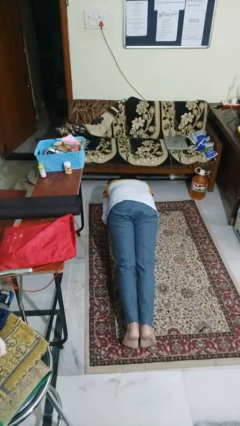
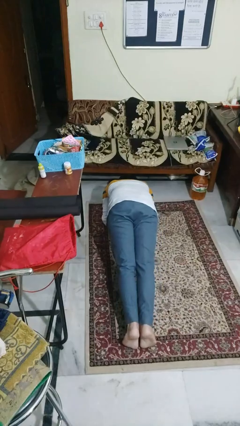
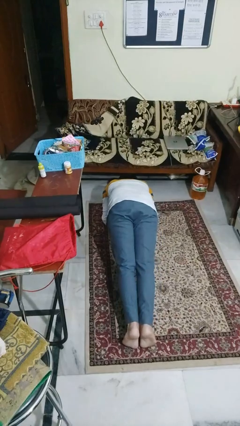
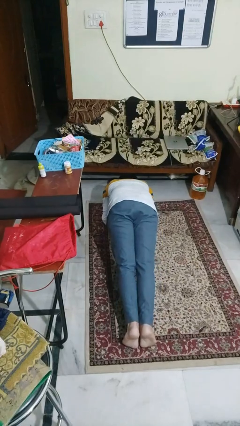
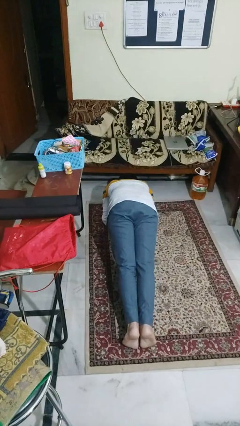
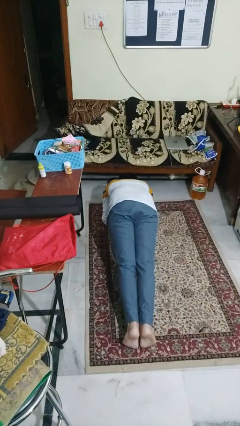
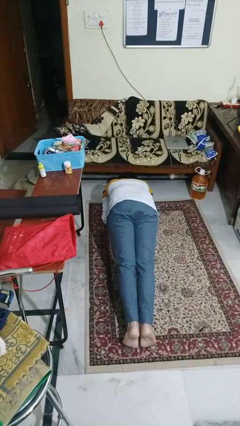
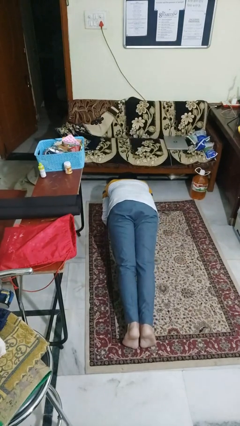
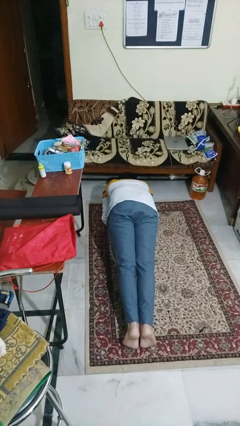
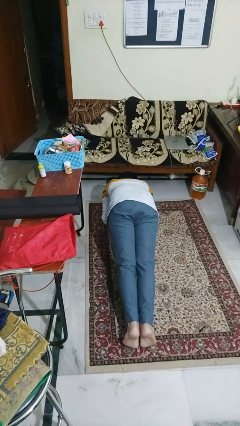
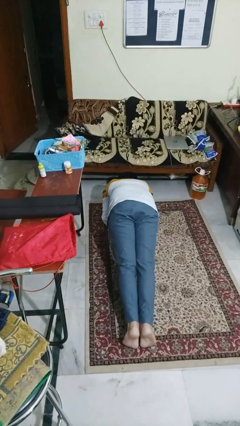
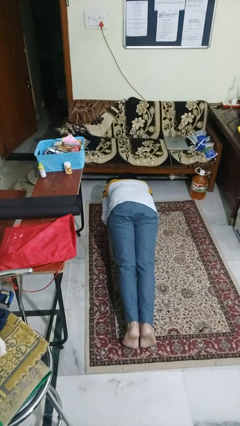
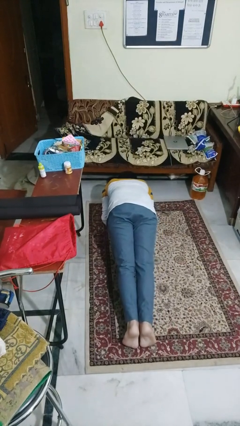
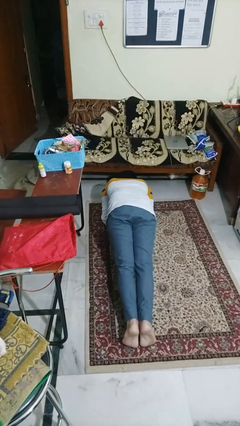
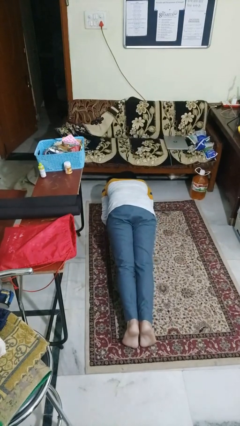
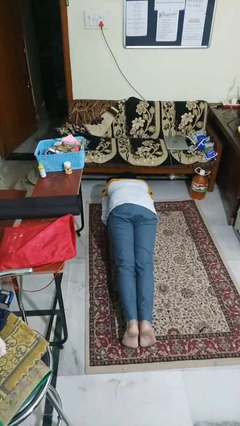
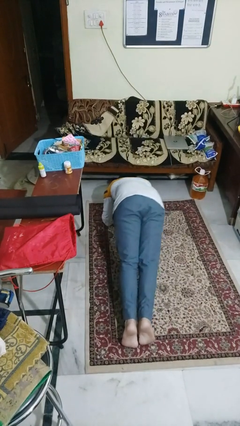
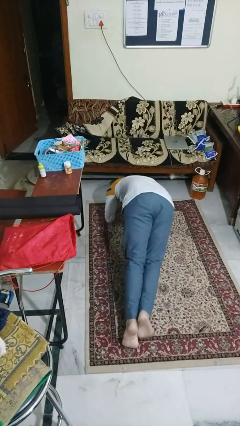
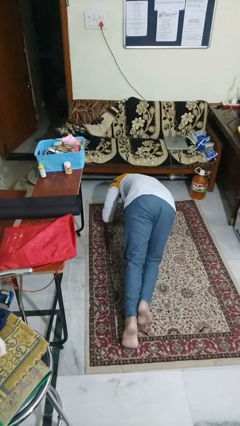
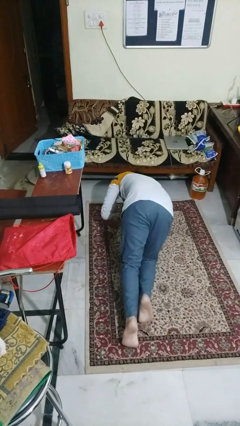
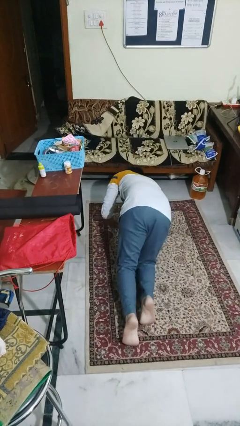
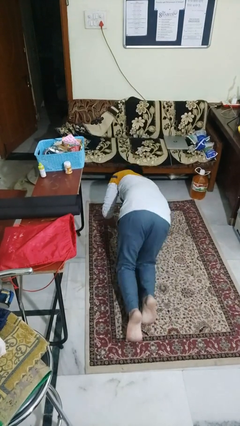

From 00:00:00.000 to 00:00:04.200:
person exercises with plank

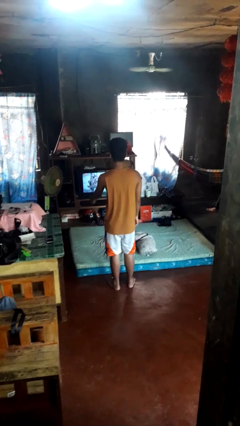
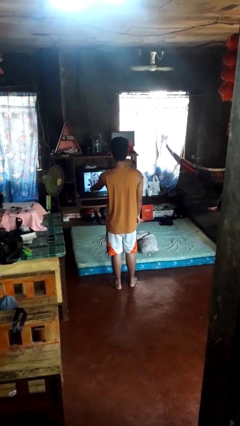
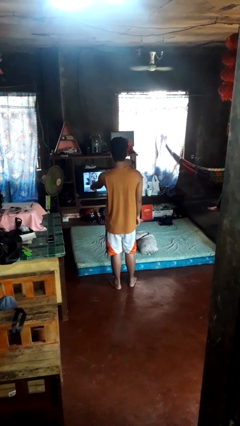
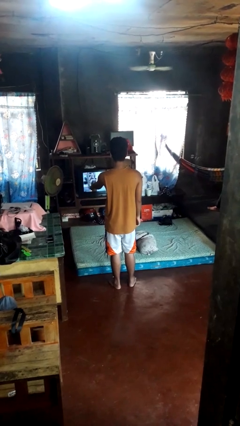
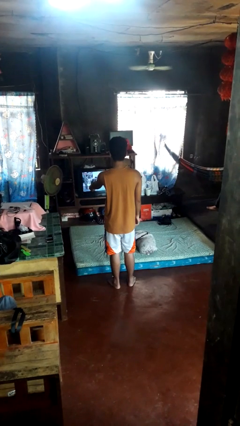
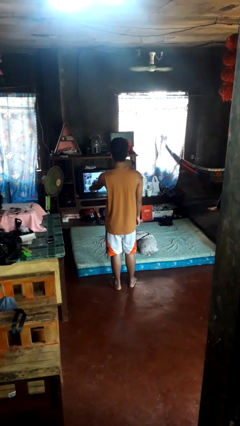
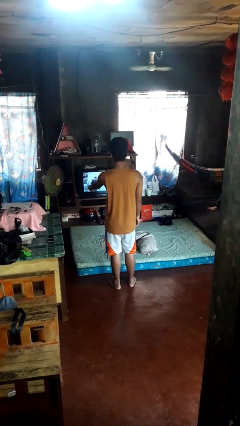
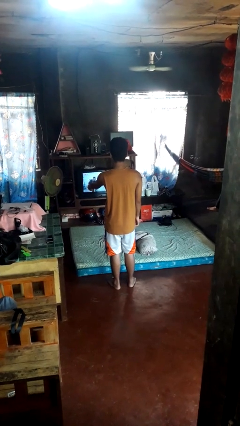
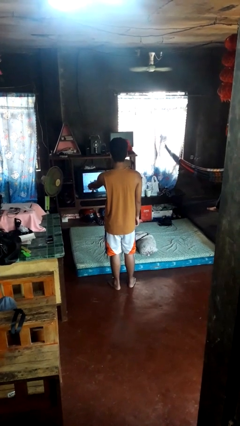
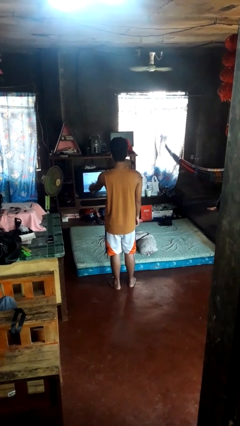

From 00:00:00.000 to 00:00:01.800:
person uses television remote

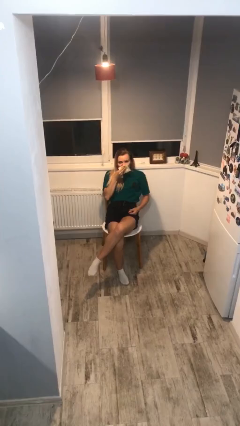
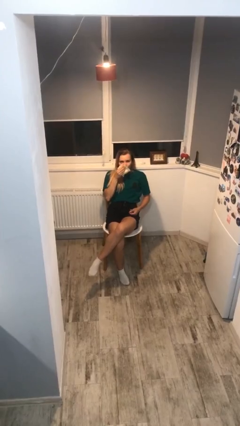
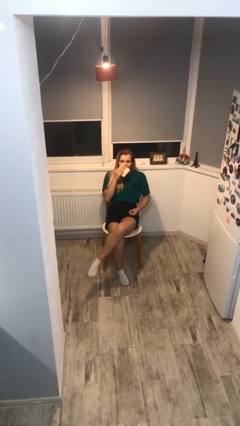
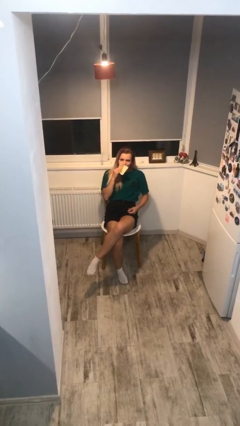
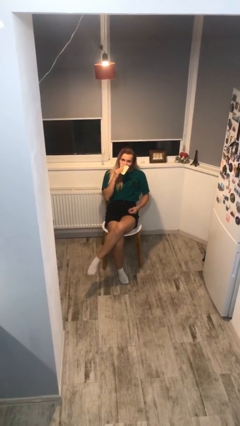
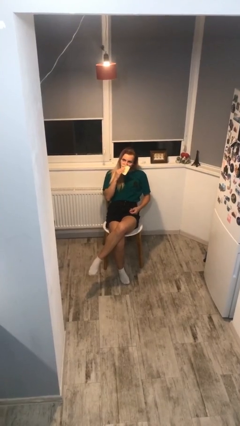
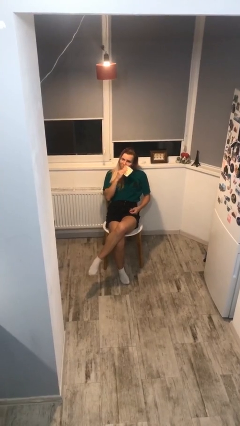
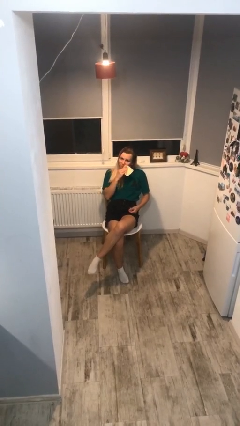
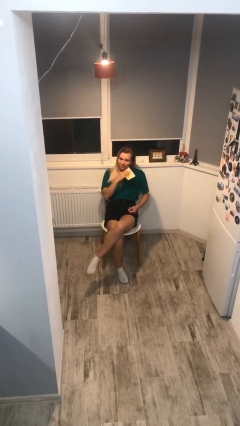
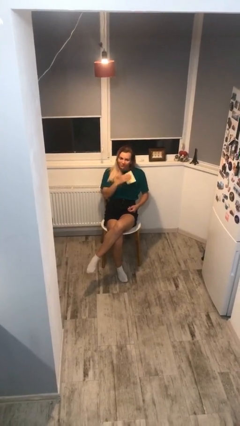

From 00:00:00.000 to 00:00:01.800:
person wipes mouth with napkin

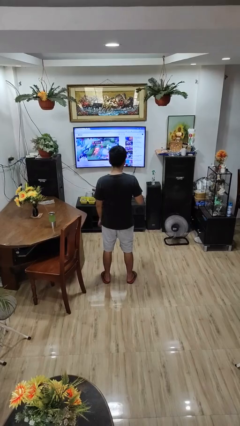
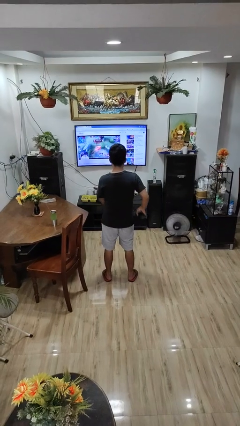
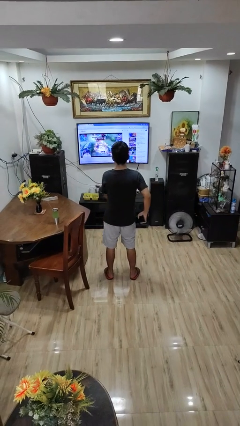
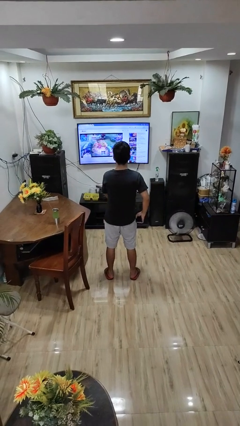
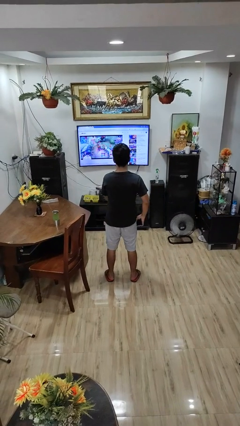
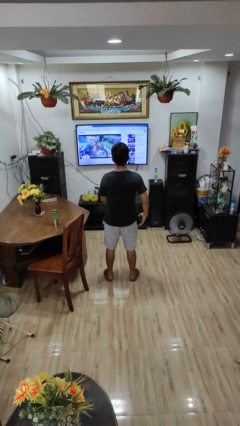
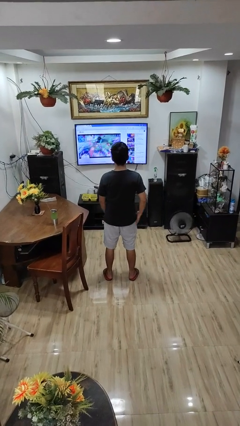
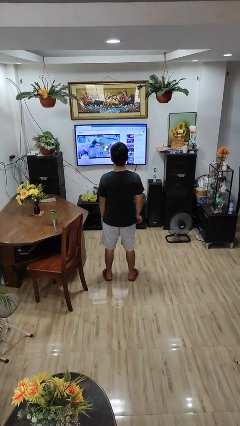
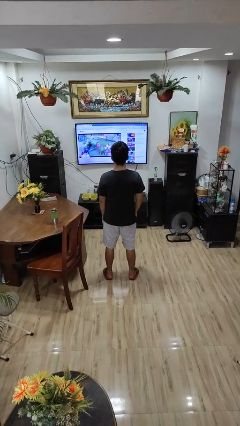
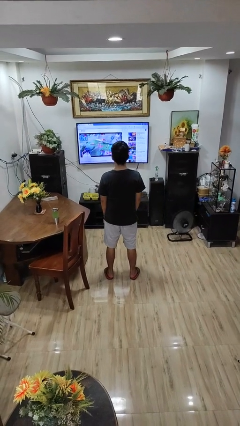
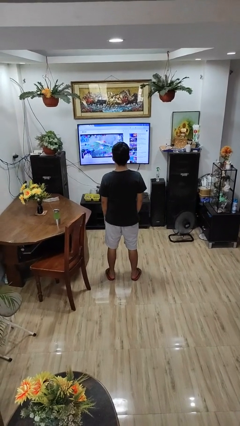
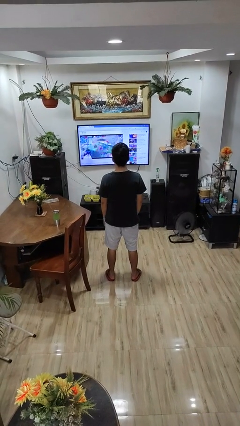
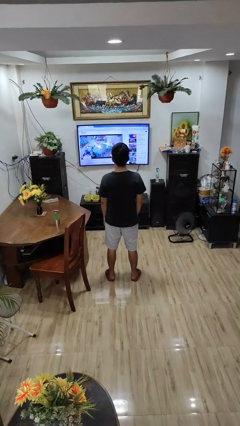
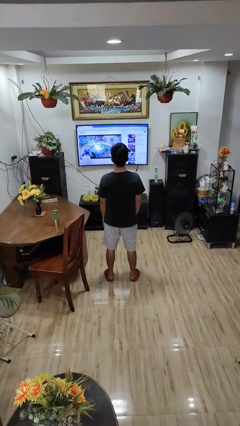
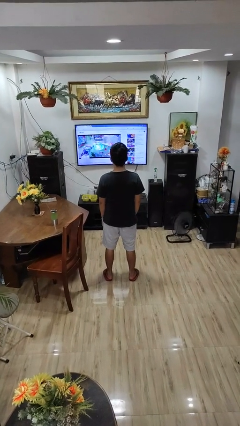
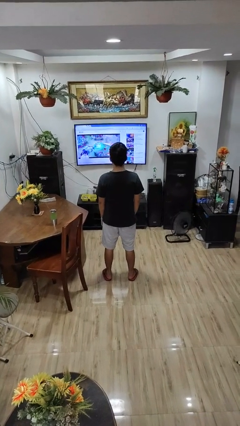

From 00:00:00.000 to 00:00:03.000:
person puts phone into pocket

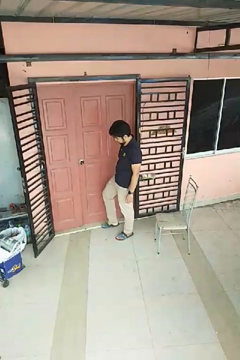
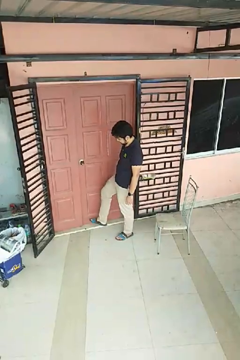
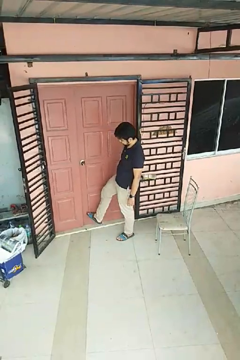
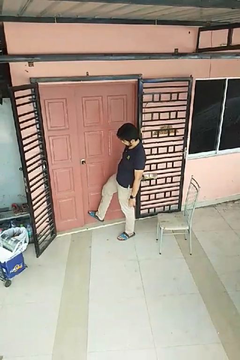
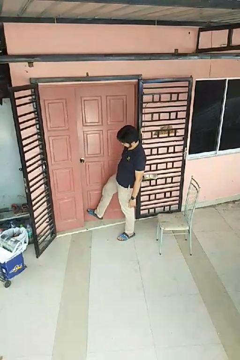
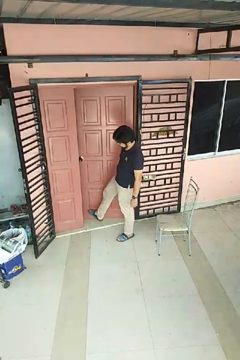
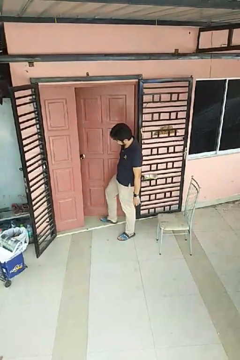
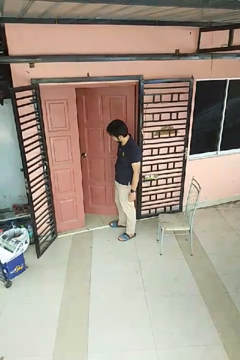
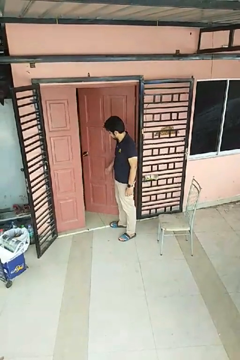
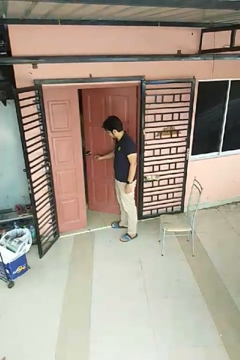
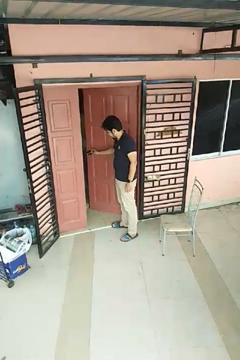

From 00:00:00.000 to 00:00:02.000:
person opens facility door

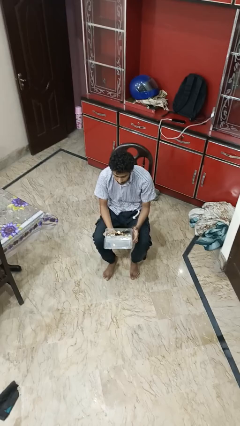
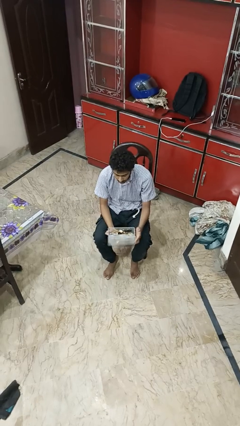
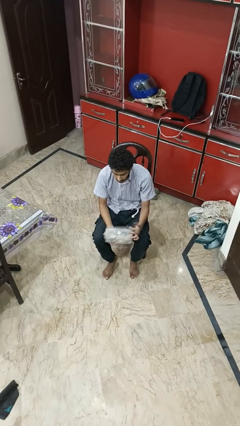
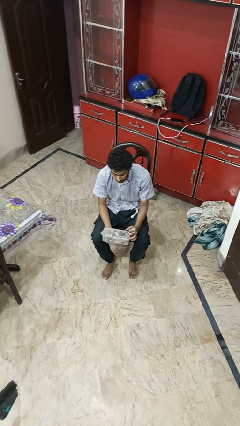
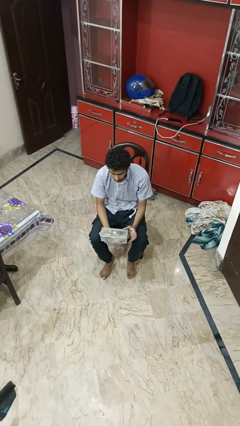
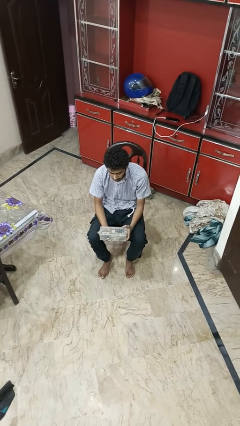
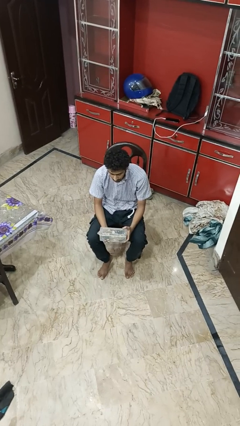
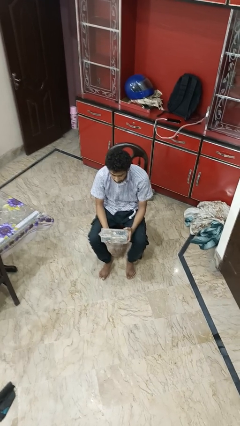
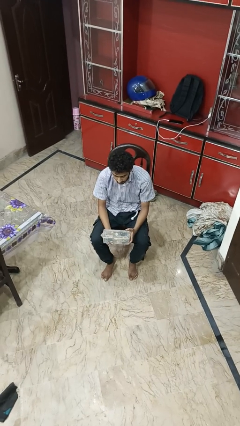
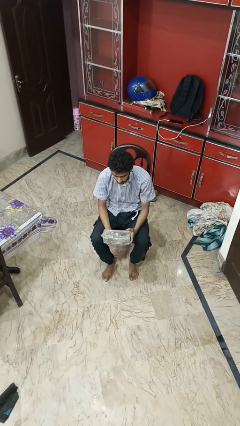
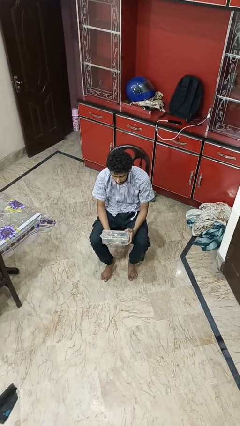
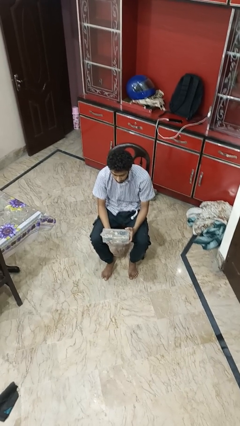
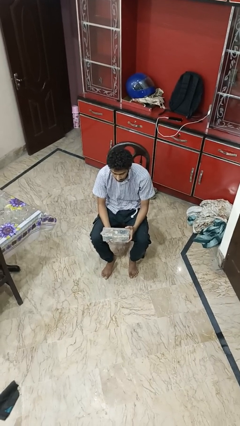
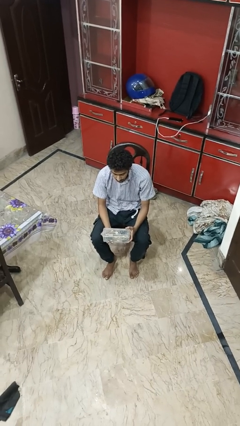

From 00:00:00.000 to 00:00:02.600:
person closes jewelry box

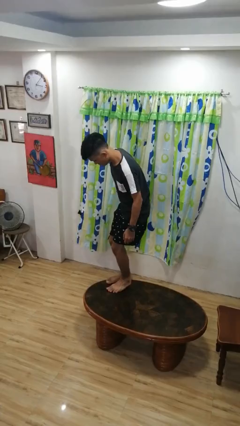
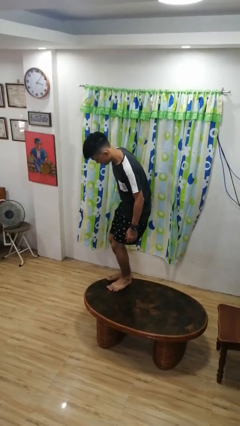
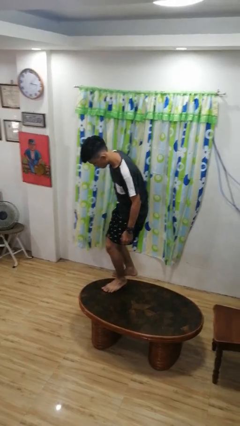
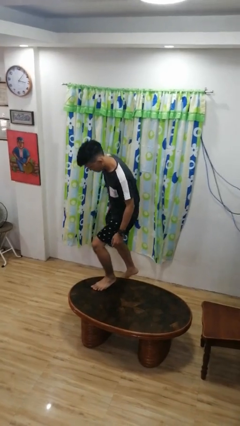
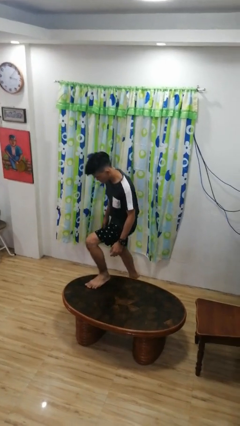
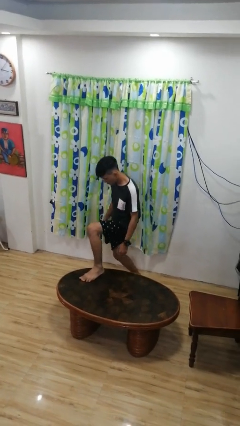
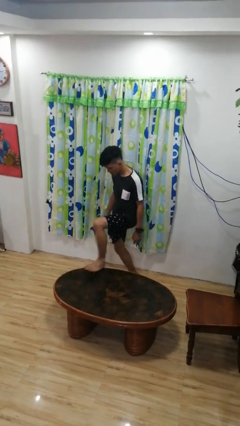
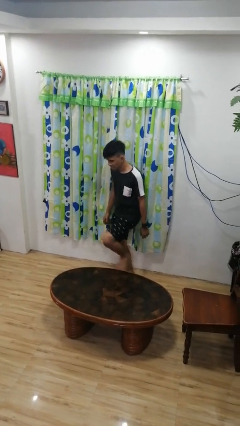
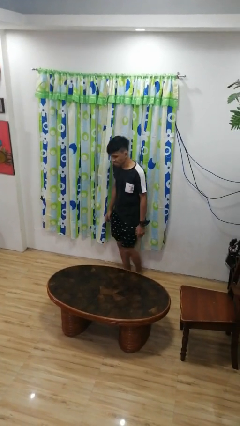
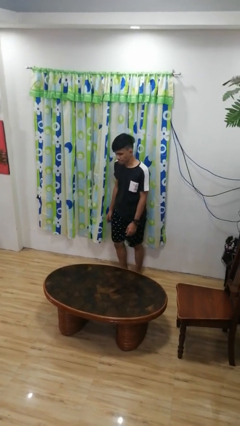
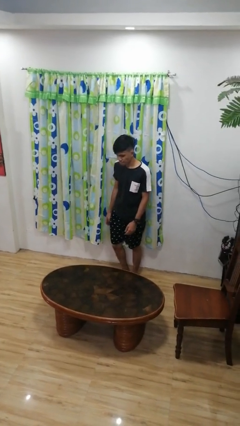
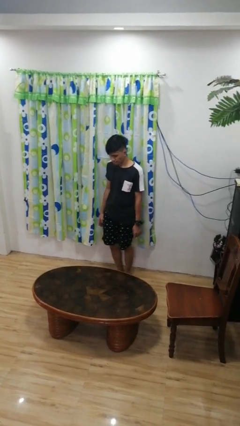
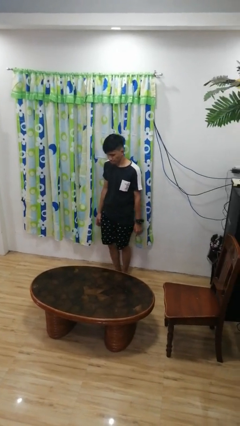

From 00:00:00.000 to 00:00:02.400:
person climbs off table
